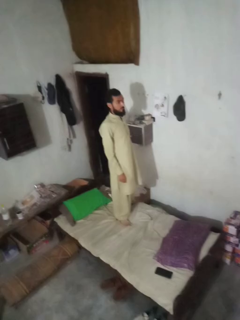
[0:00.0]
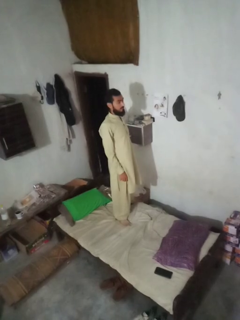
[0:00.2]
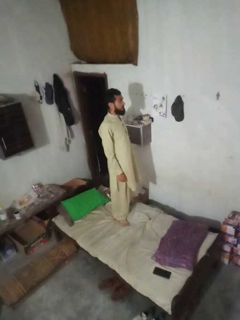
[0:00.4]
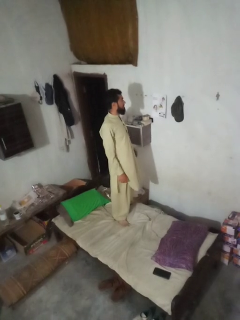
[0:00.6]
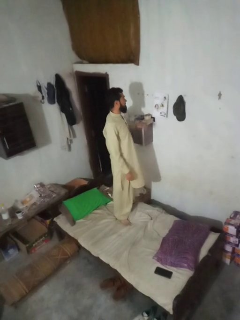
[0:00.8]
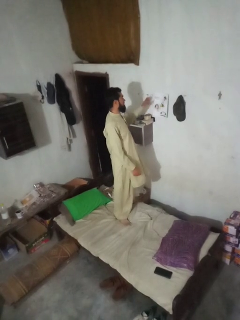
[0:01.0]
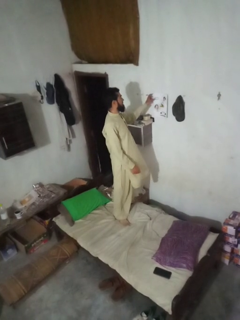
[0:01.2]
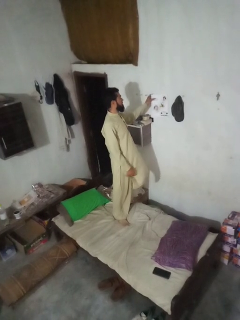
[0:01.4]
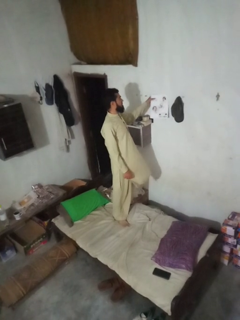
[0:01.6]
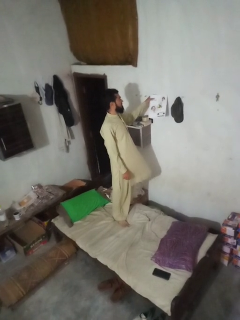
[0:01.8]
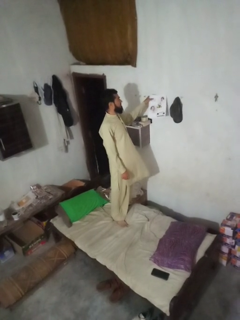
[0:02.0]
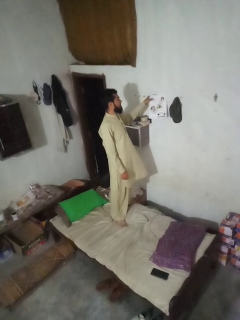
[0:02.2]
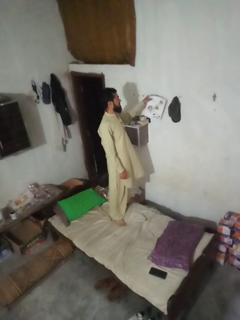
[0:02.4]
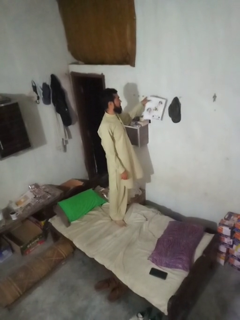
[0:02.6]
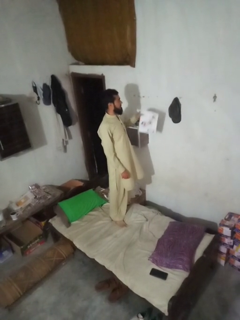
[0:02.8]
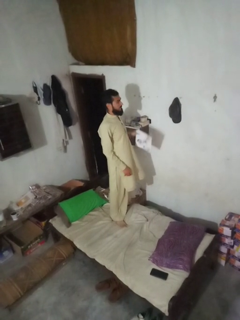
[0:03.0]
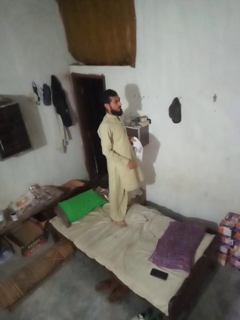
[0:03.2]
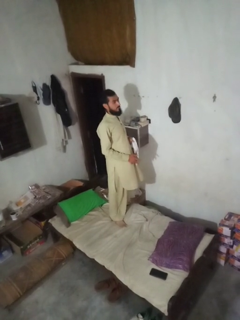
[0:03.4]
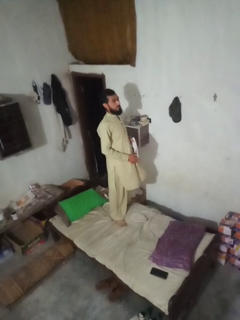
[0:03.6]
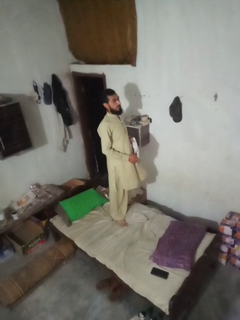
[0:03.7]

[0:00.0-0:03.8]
person takes down picture frame

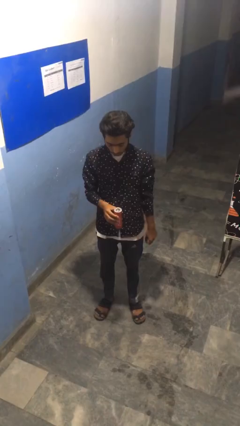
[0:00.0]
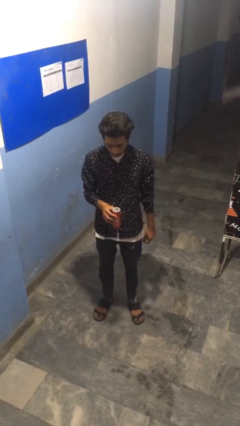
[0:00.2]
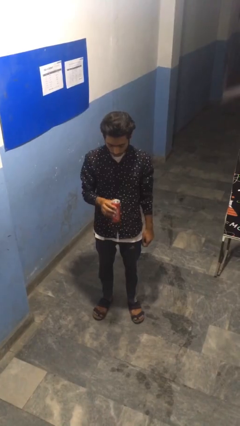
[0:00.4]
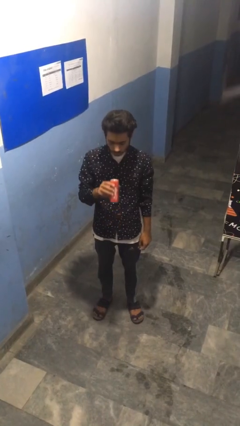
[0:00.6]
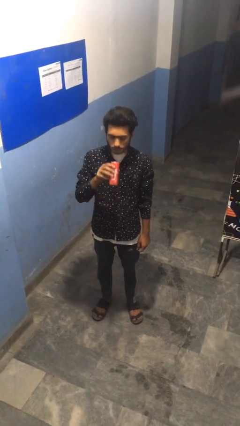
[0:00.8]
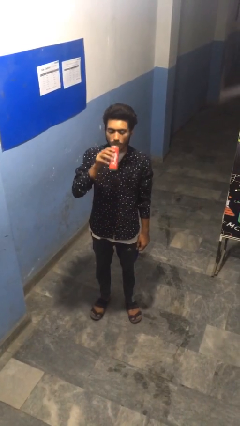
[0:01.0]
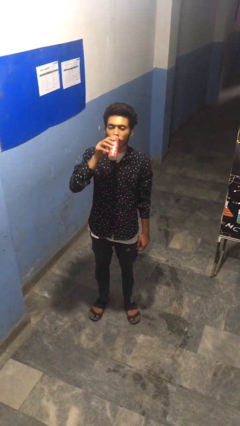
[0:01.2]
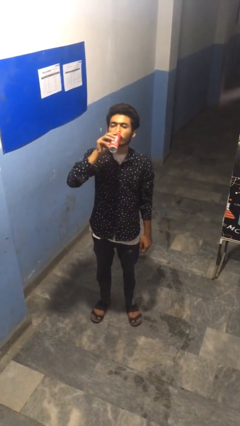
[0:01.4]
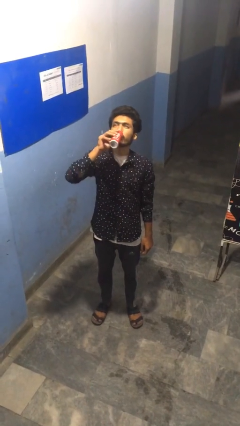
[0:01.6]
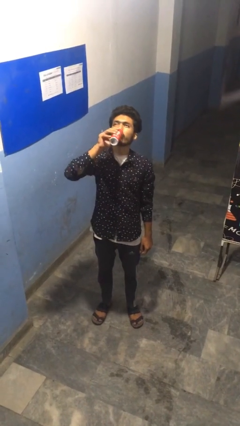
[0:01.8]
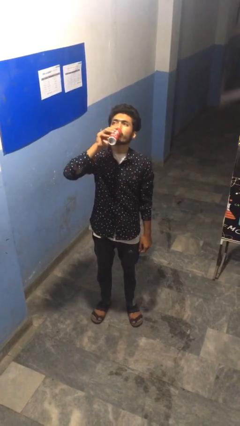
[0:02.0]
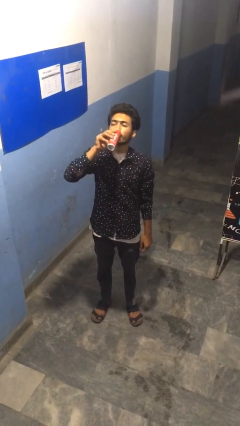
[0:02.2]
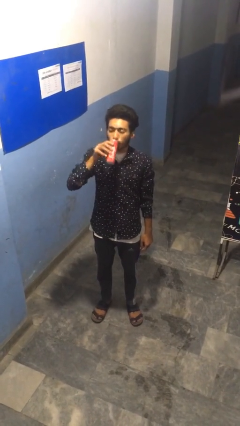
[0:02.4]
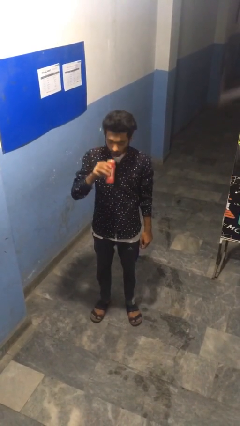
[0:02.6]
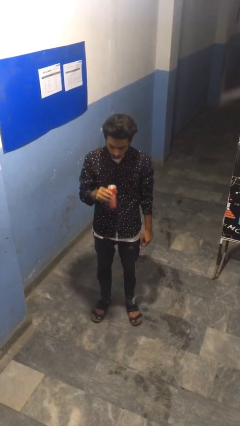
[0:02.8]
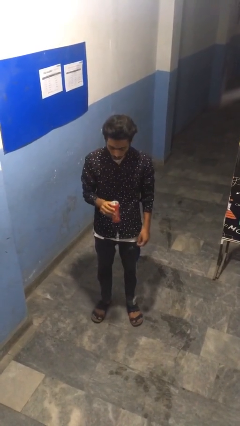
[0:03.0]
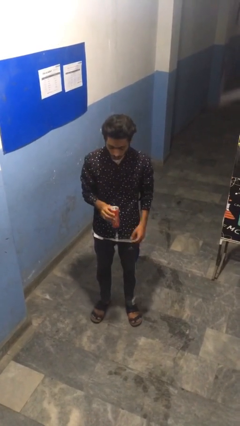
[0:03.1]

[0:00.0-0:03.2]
person drinks from beverage can

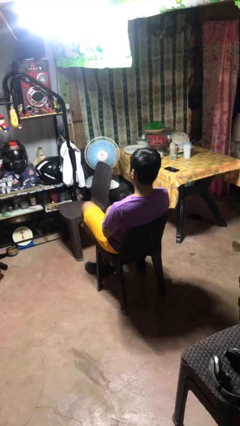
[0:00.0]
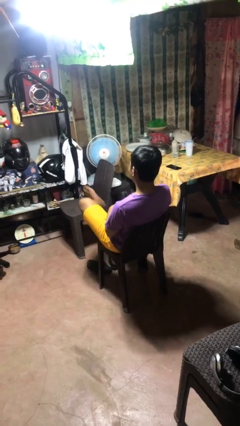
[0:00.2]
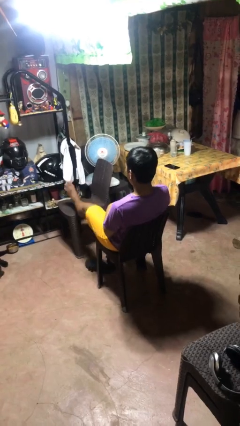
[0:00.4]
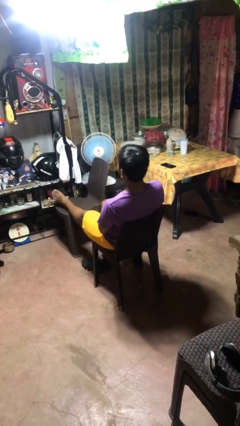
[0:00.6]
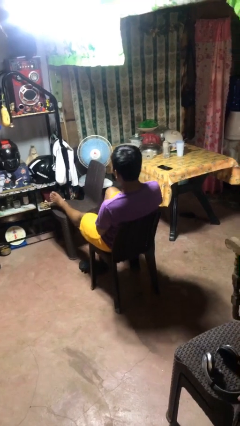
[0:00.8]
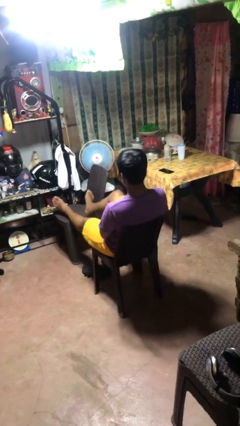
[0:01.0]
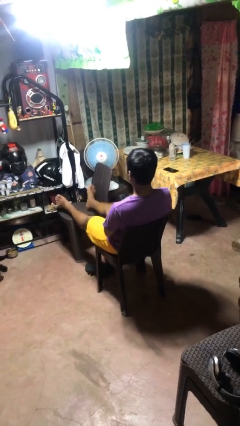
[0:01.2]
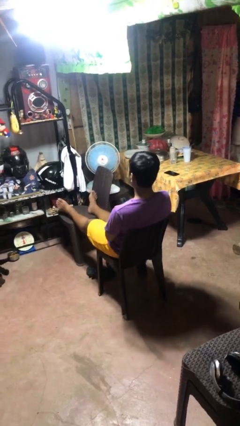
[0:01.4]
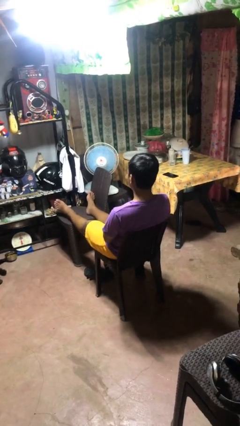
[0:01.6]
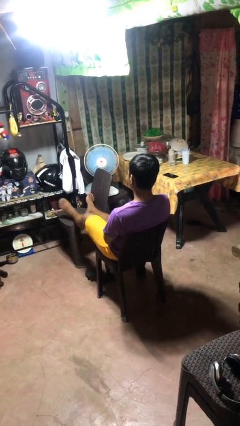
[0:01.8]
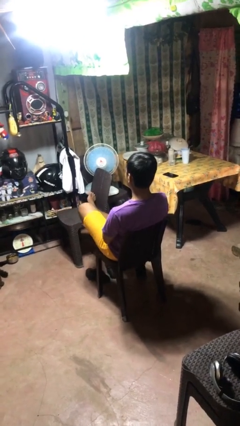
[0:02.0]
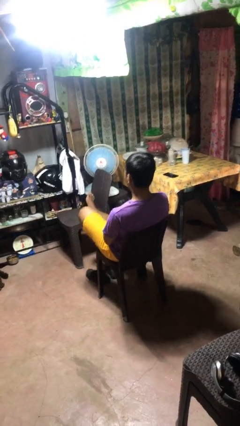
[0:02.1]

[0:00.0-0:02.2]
person puts feet up

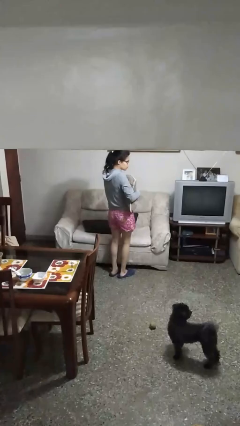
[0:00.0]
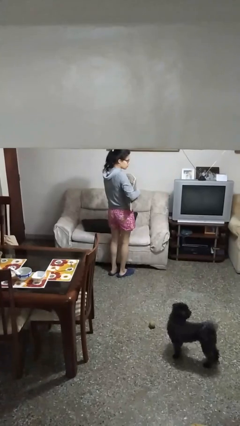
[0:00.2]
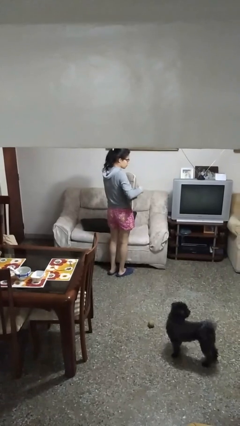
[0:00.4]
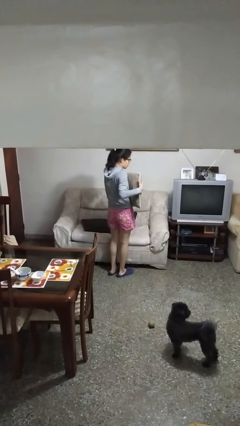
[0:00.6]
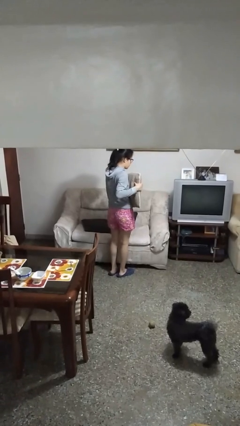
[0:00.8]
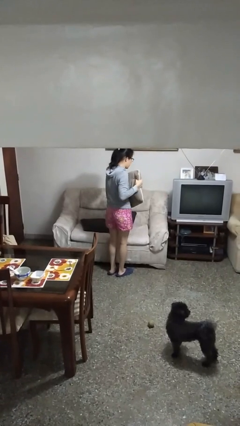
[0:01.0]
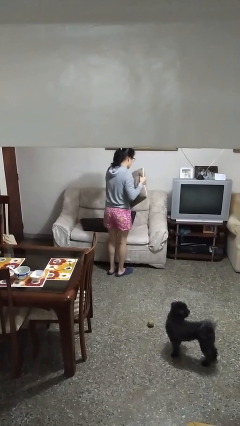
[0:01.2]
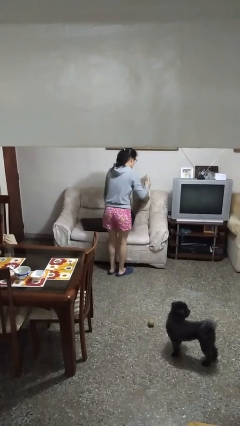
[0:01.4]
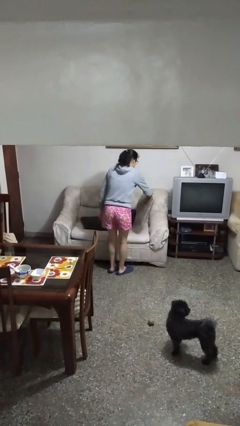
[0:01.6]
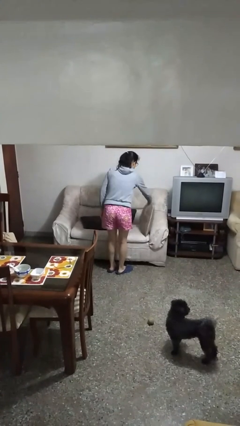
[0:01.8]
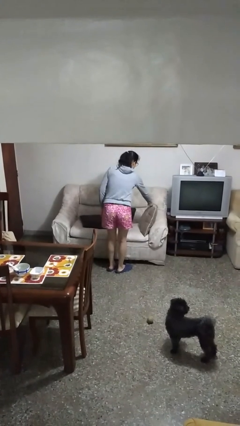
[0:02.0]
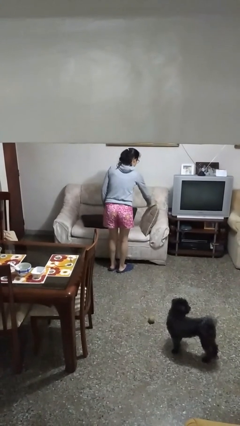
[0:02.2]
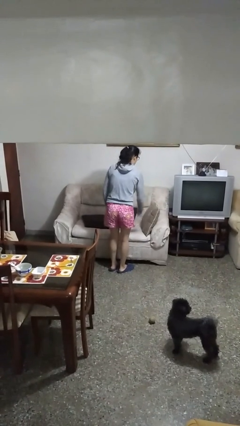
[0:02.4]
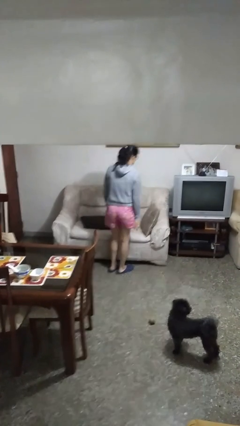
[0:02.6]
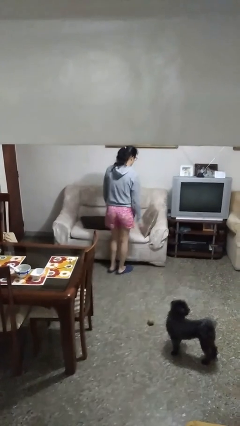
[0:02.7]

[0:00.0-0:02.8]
person puts down object on couch

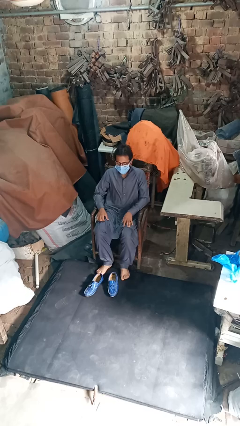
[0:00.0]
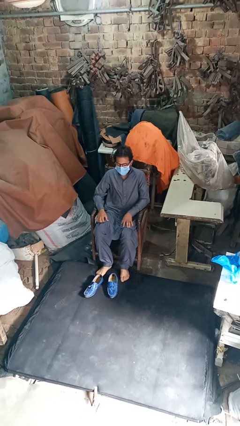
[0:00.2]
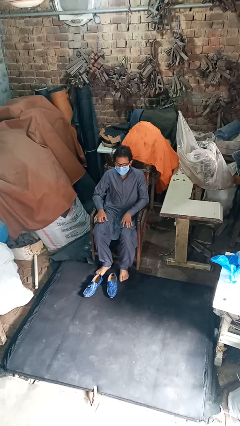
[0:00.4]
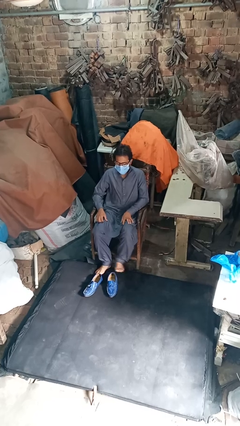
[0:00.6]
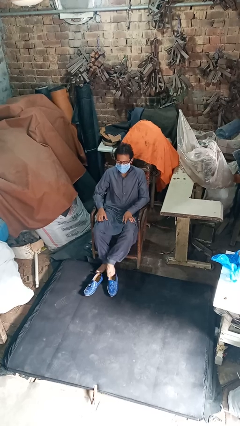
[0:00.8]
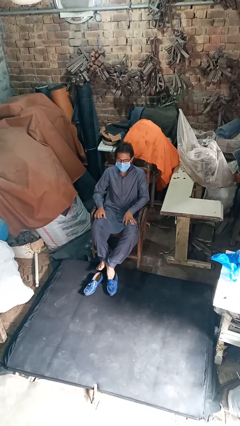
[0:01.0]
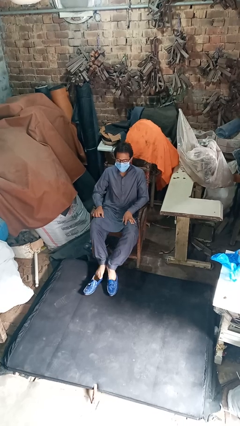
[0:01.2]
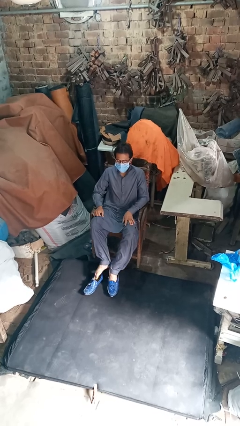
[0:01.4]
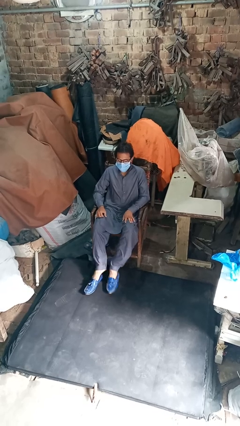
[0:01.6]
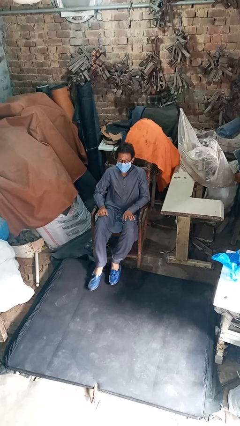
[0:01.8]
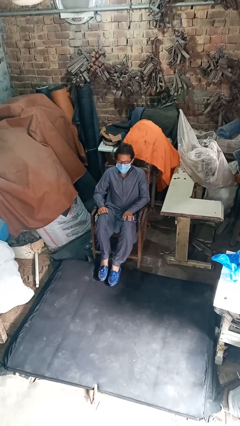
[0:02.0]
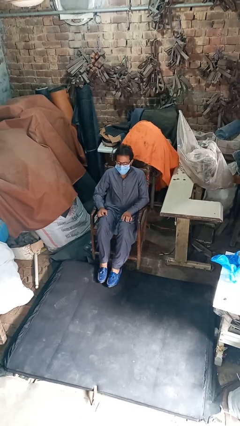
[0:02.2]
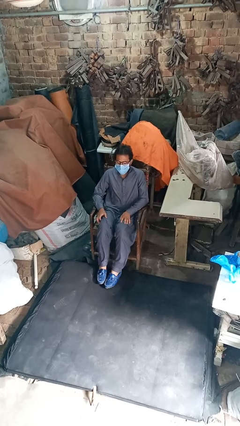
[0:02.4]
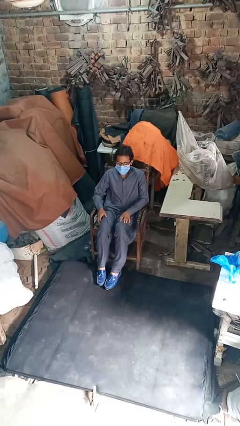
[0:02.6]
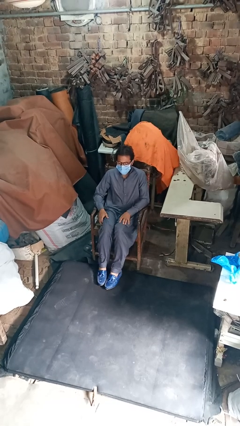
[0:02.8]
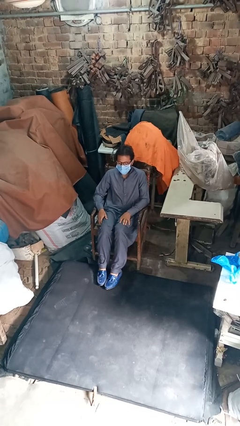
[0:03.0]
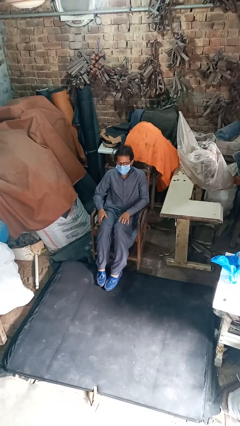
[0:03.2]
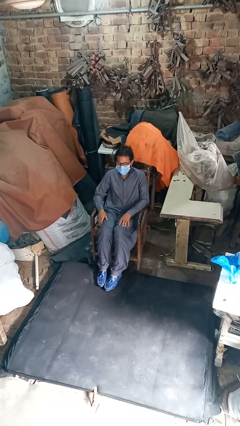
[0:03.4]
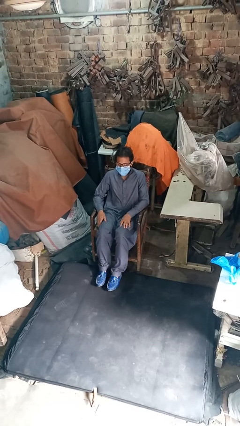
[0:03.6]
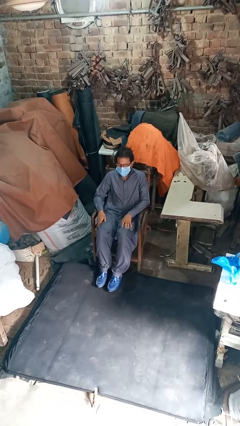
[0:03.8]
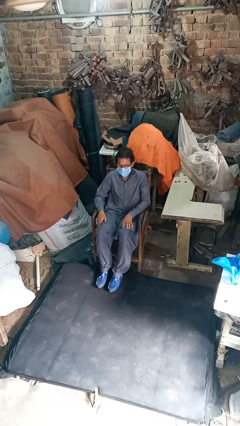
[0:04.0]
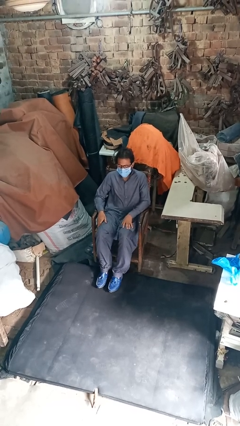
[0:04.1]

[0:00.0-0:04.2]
person puts on shoes

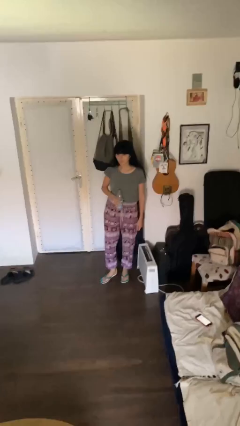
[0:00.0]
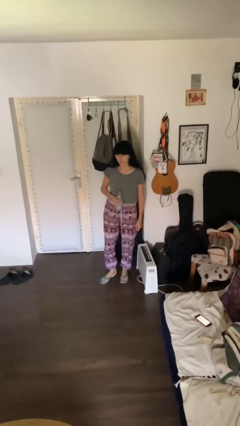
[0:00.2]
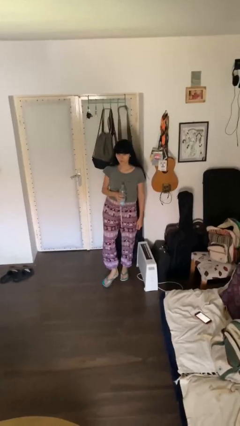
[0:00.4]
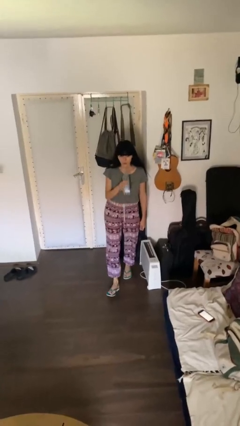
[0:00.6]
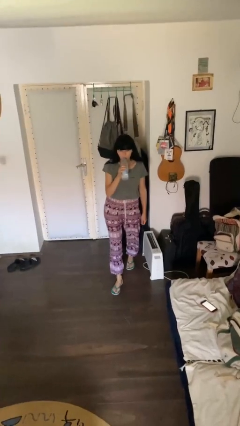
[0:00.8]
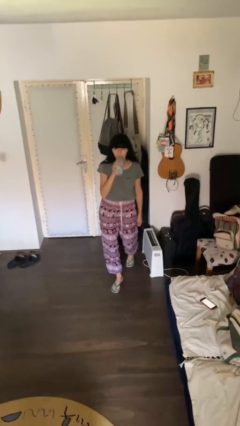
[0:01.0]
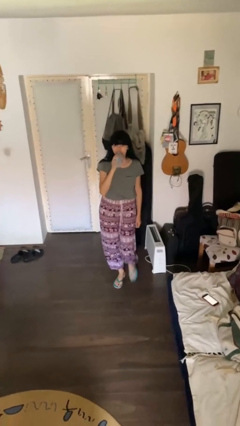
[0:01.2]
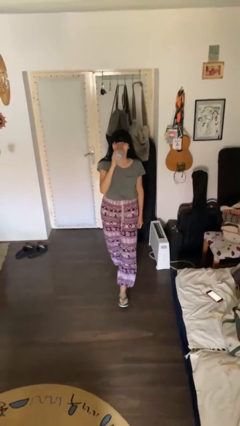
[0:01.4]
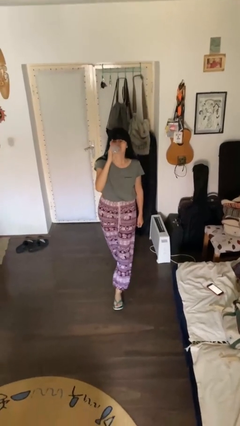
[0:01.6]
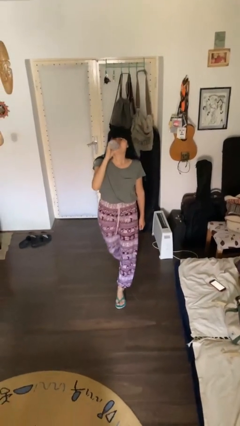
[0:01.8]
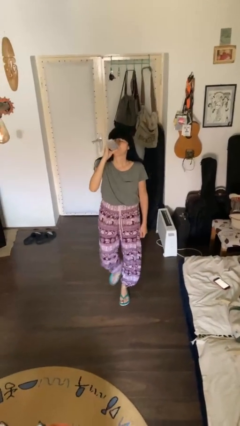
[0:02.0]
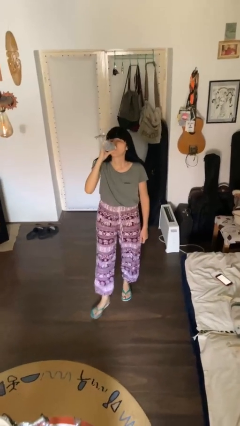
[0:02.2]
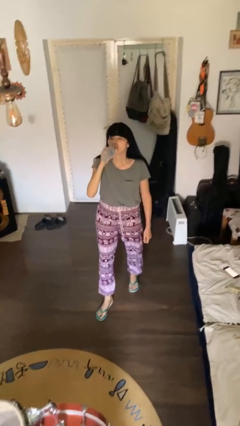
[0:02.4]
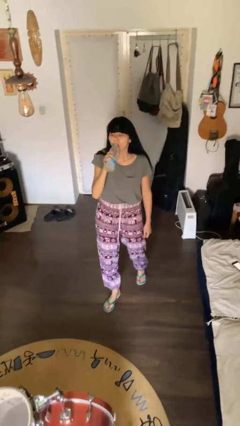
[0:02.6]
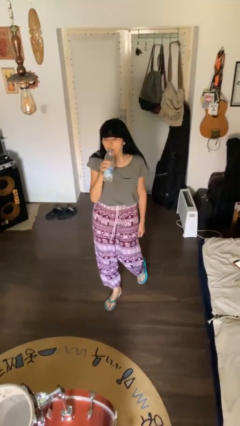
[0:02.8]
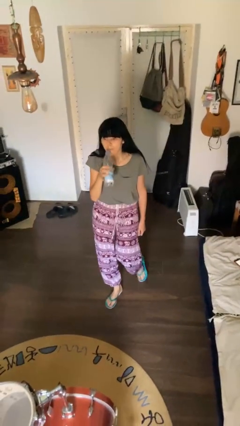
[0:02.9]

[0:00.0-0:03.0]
person drinks from bottle
